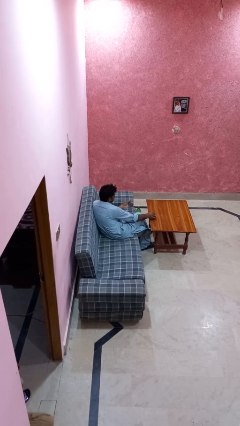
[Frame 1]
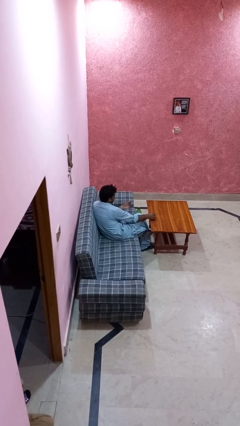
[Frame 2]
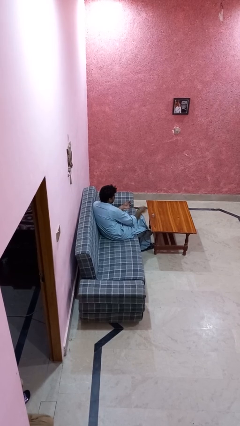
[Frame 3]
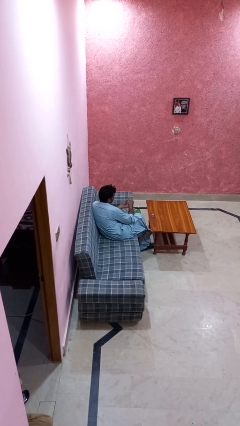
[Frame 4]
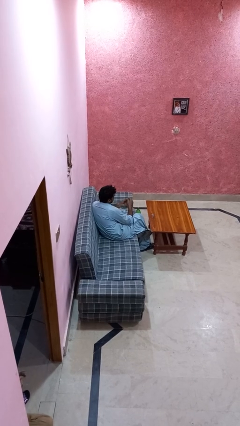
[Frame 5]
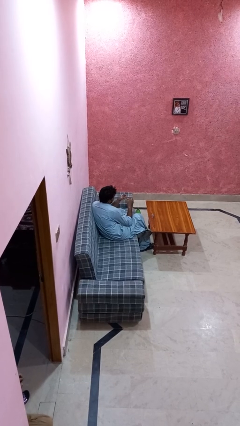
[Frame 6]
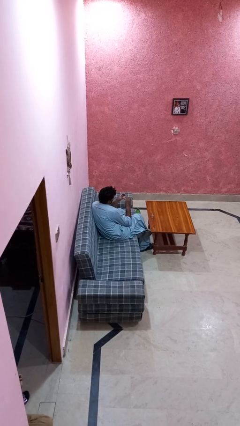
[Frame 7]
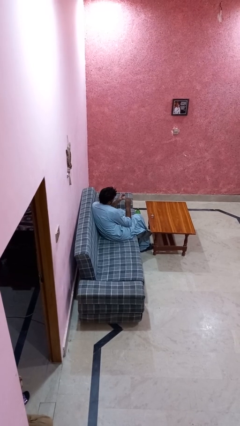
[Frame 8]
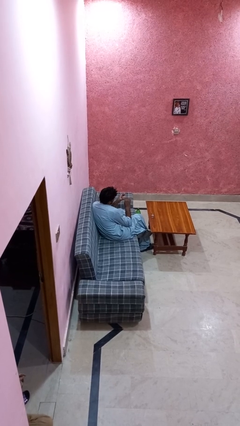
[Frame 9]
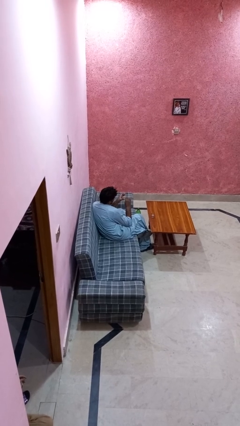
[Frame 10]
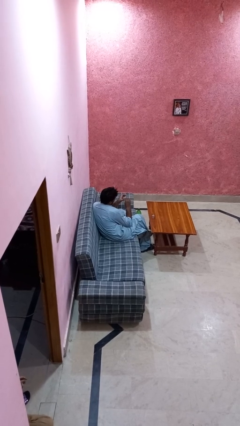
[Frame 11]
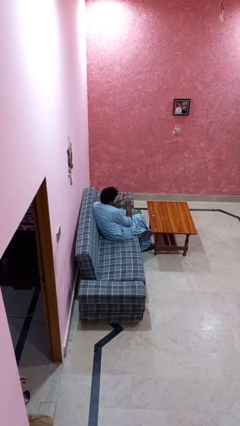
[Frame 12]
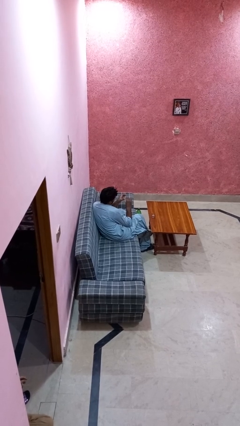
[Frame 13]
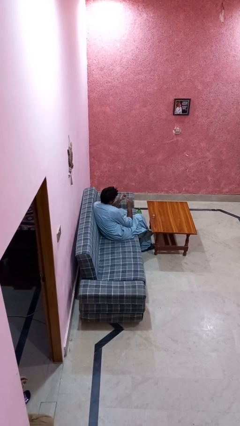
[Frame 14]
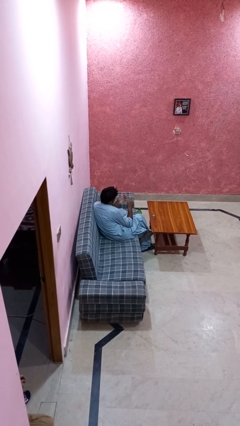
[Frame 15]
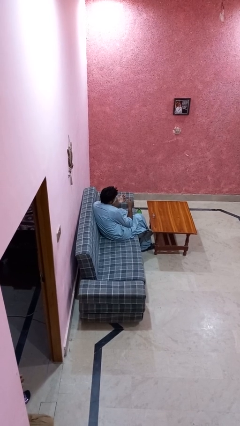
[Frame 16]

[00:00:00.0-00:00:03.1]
person paints fingernails

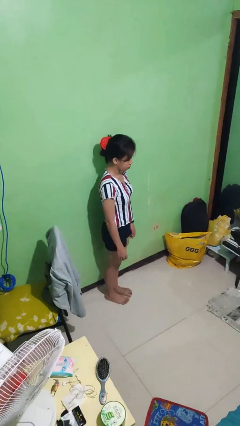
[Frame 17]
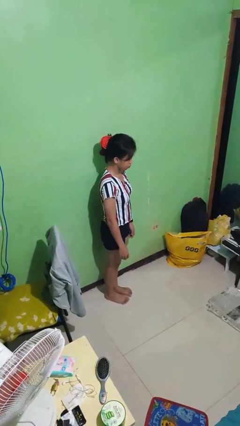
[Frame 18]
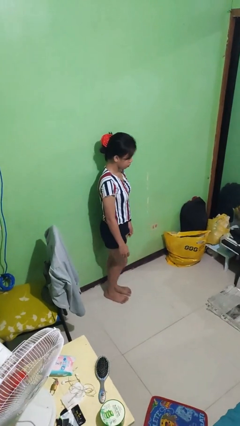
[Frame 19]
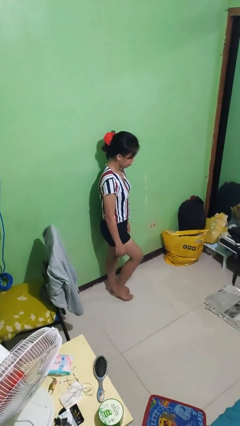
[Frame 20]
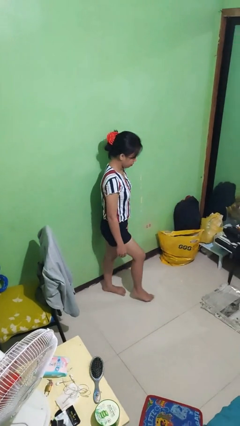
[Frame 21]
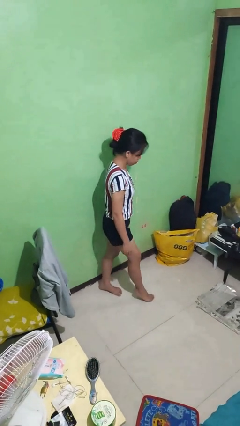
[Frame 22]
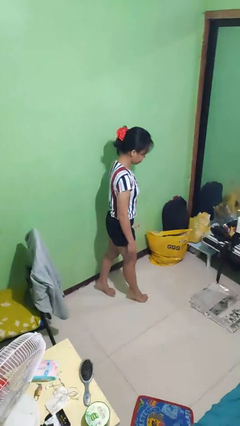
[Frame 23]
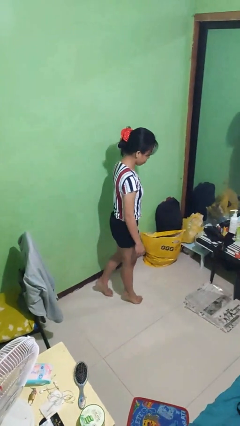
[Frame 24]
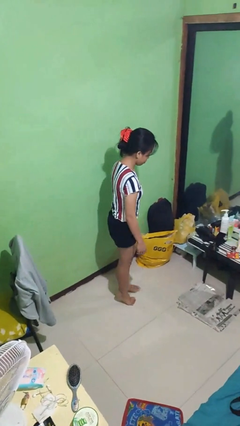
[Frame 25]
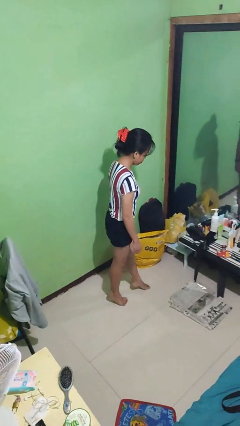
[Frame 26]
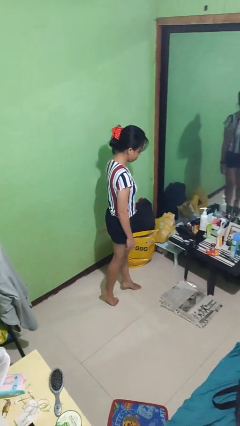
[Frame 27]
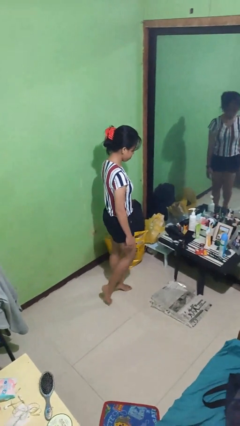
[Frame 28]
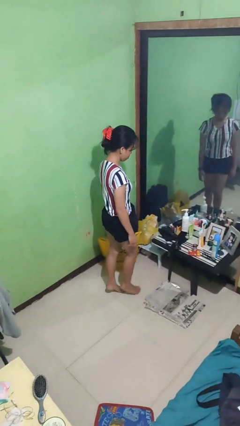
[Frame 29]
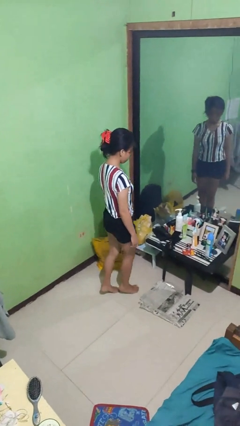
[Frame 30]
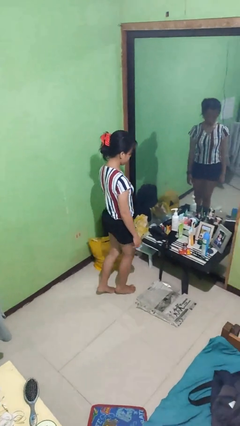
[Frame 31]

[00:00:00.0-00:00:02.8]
person walks tiptoe

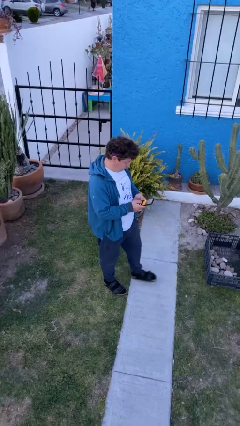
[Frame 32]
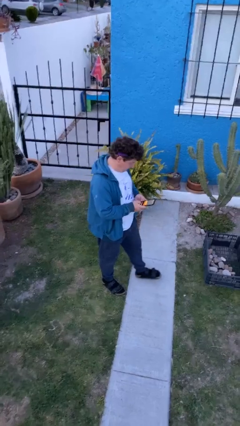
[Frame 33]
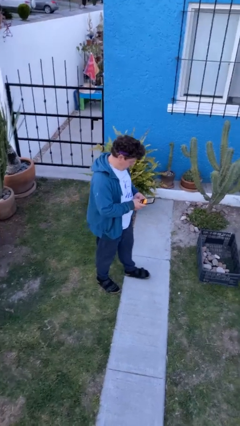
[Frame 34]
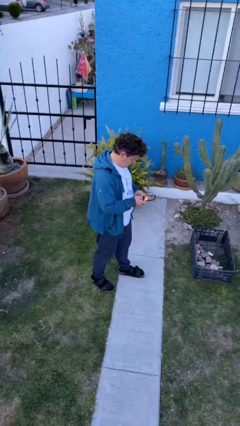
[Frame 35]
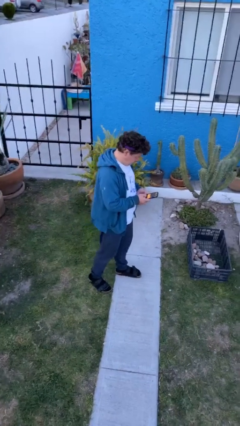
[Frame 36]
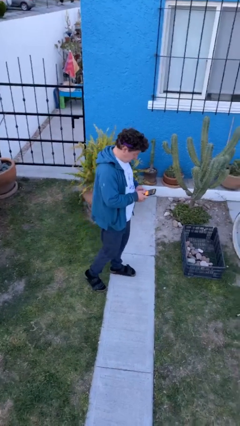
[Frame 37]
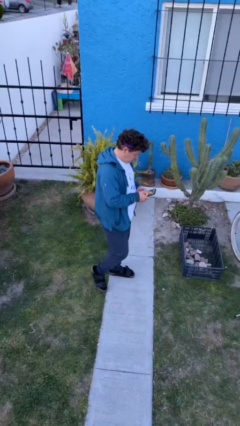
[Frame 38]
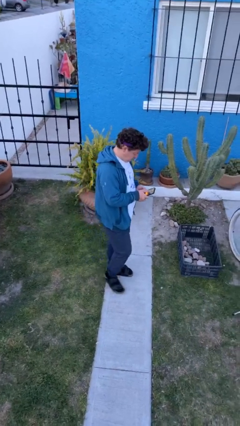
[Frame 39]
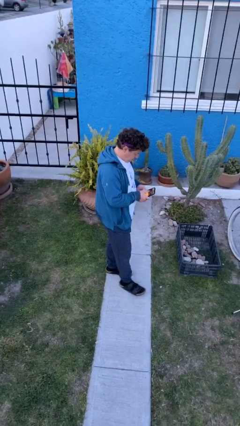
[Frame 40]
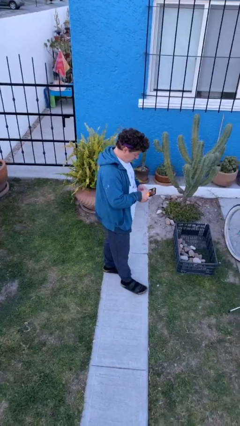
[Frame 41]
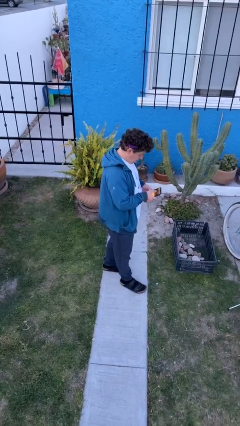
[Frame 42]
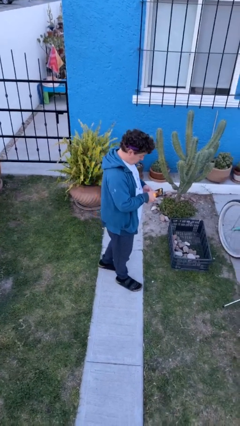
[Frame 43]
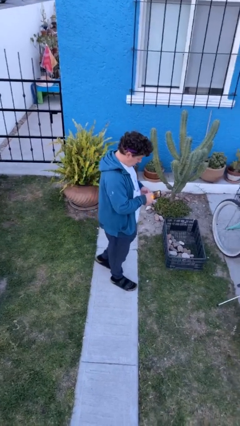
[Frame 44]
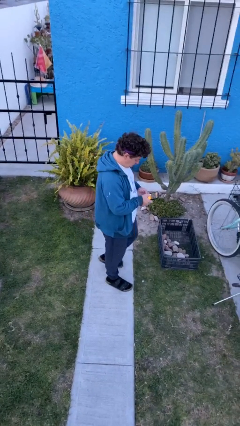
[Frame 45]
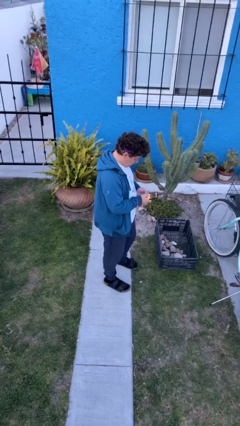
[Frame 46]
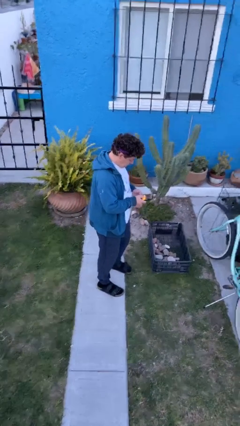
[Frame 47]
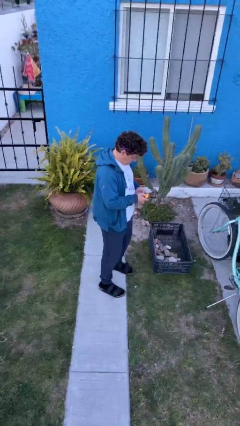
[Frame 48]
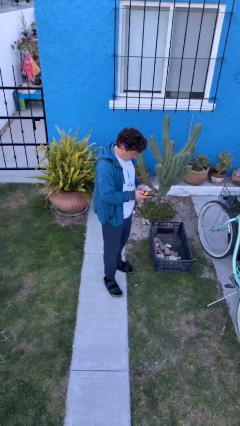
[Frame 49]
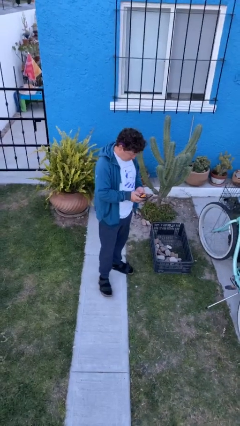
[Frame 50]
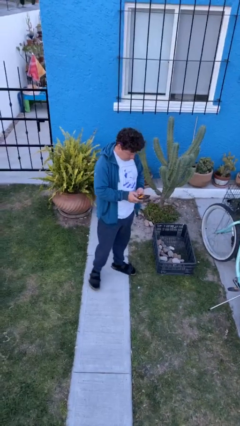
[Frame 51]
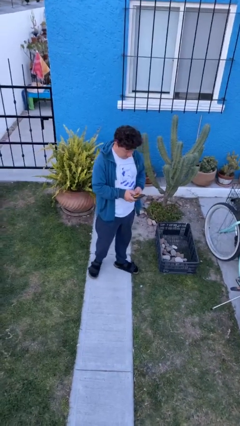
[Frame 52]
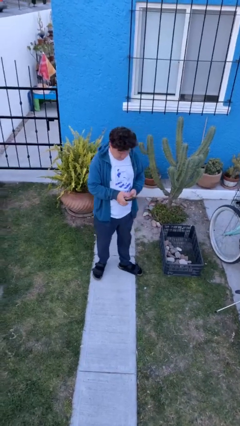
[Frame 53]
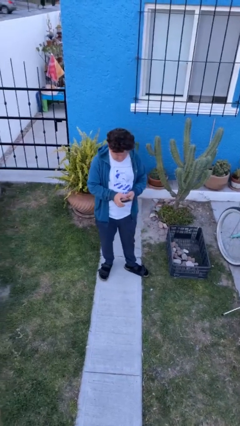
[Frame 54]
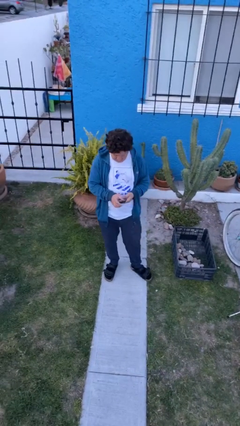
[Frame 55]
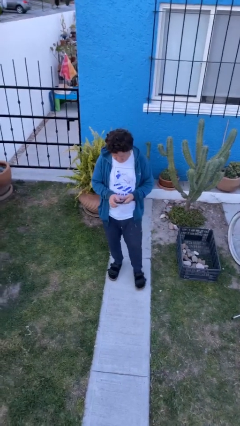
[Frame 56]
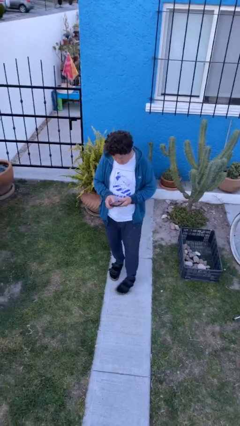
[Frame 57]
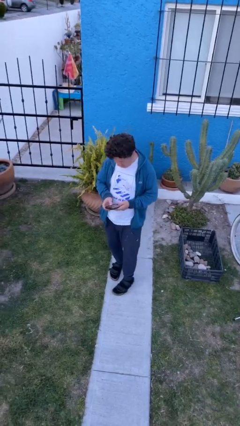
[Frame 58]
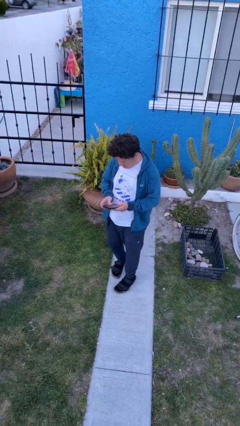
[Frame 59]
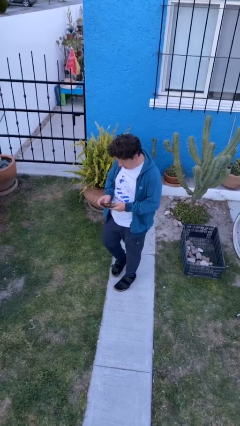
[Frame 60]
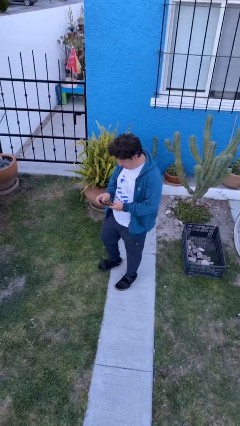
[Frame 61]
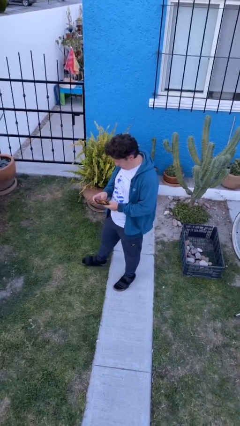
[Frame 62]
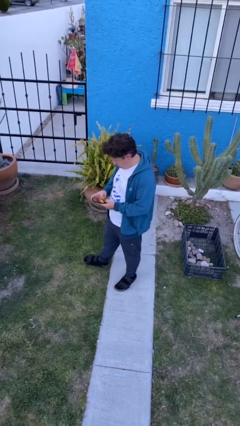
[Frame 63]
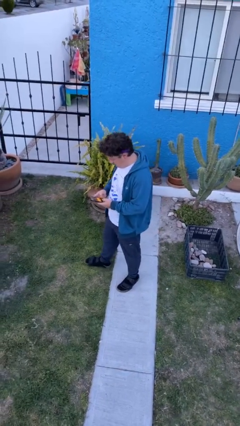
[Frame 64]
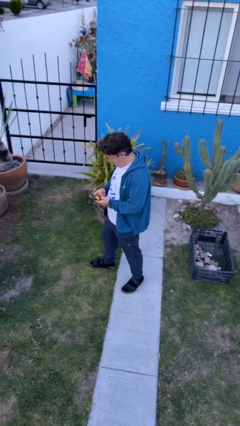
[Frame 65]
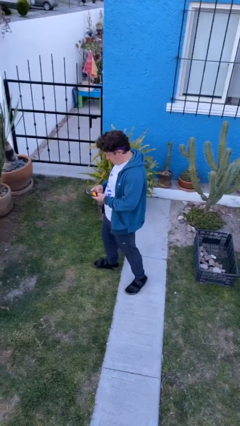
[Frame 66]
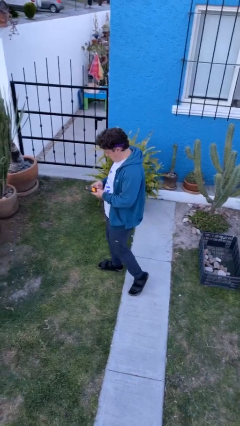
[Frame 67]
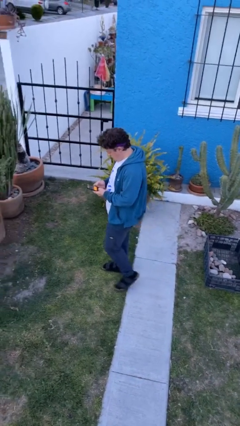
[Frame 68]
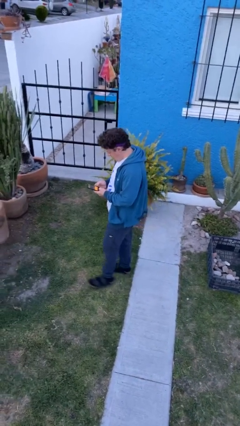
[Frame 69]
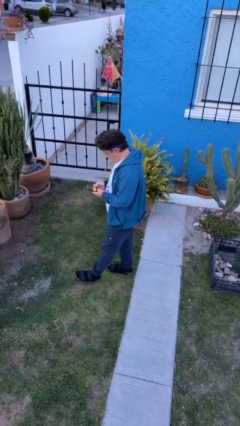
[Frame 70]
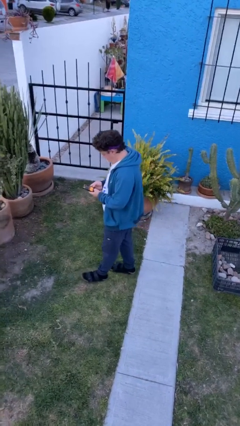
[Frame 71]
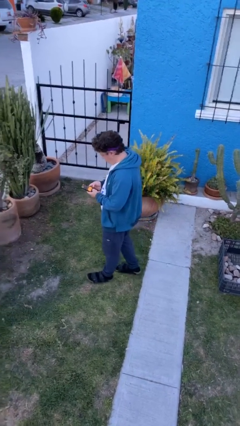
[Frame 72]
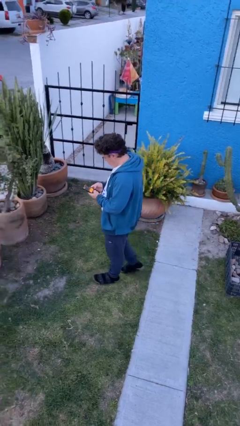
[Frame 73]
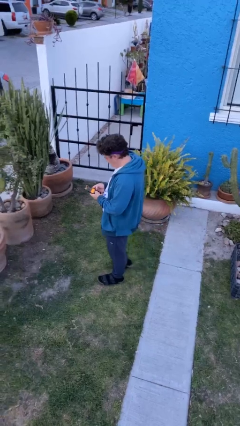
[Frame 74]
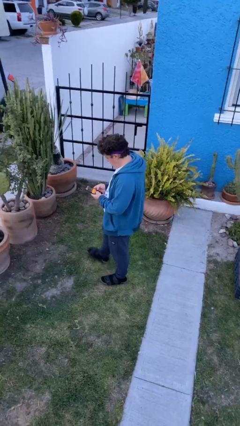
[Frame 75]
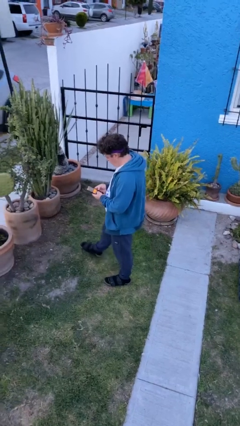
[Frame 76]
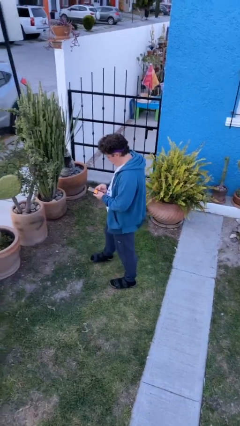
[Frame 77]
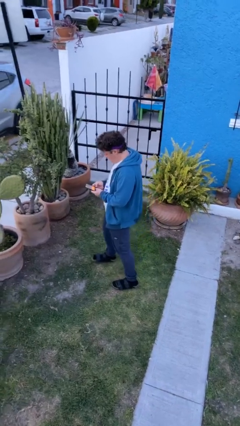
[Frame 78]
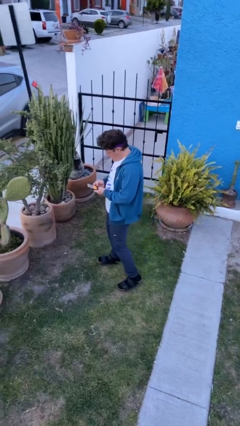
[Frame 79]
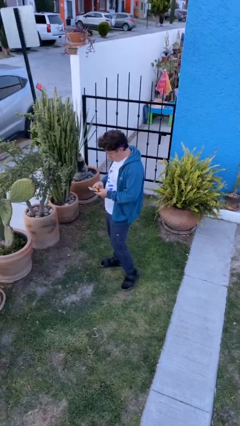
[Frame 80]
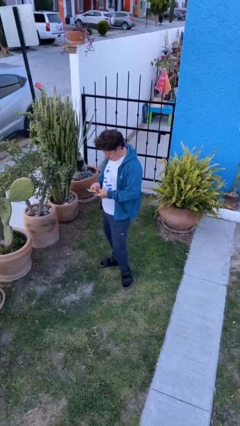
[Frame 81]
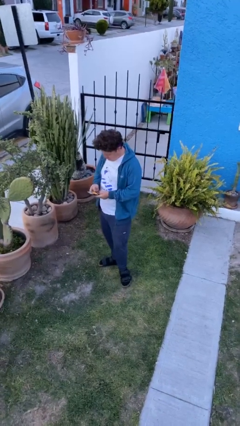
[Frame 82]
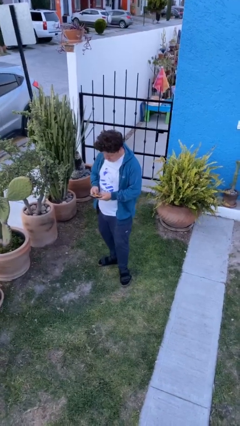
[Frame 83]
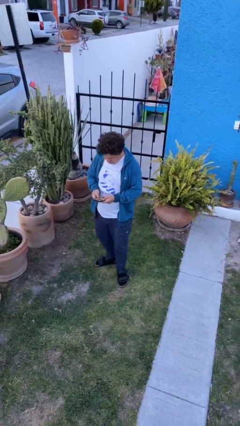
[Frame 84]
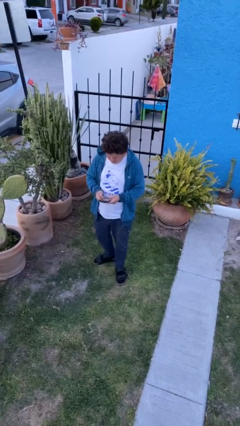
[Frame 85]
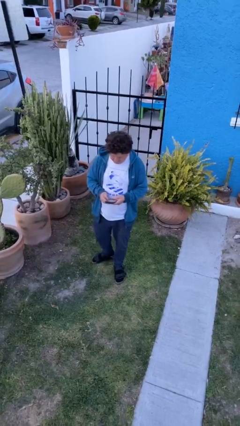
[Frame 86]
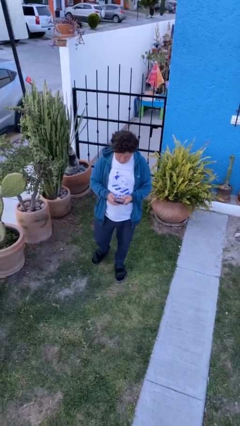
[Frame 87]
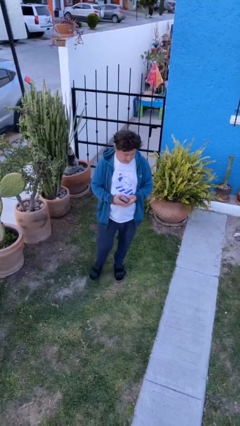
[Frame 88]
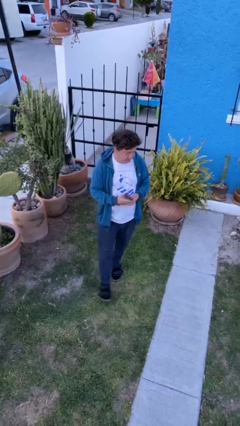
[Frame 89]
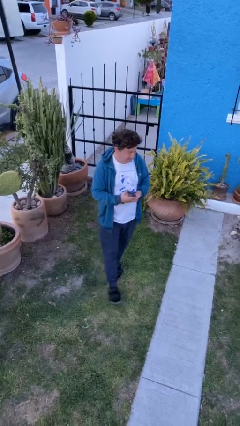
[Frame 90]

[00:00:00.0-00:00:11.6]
person texts on phone
